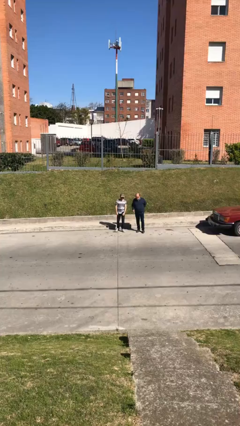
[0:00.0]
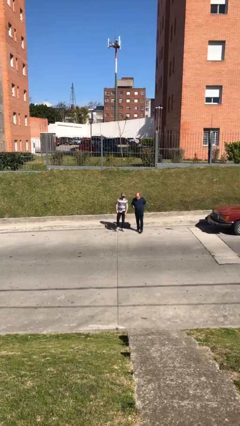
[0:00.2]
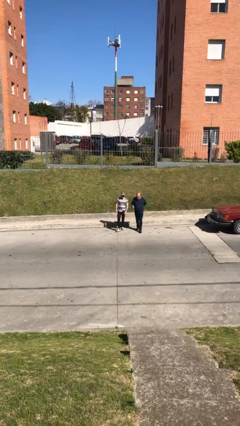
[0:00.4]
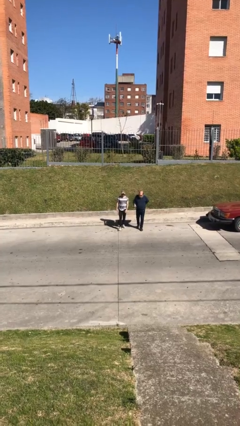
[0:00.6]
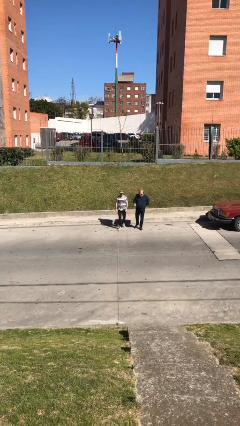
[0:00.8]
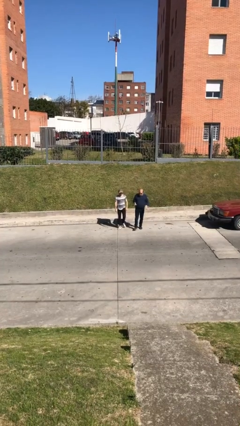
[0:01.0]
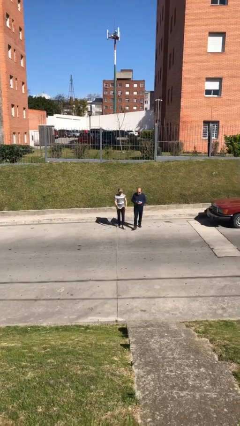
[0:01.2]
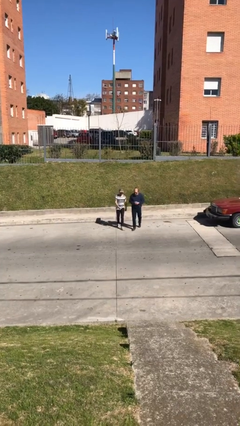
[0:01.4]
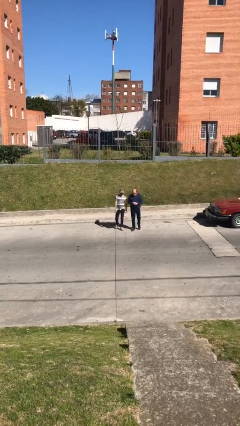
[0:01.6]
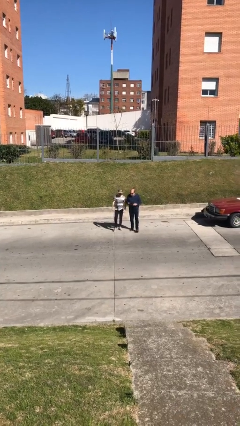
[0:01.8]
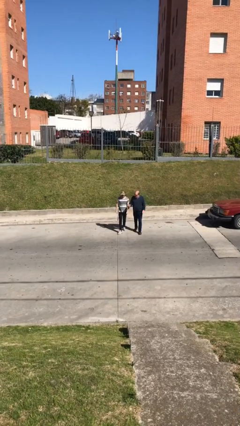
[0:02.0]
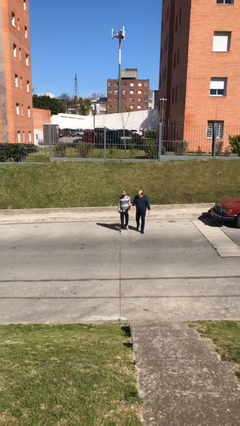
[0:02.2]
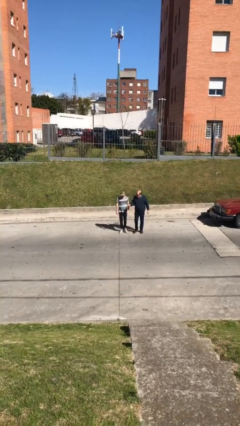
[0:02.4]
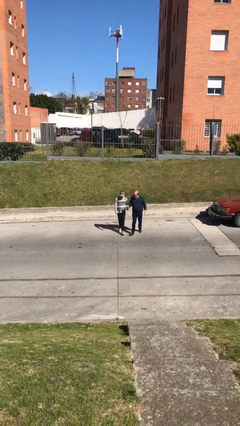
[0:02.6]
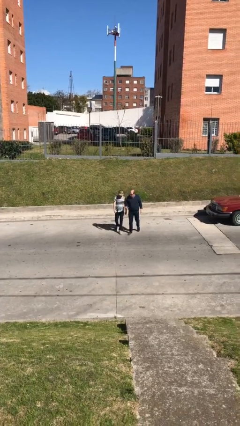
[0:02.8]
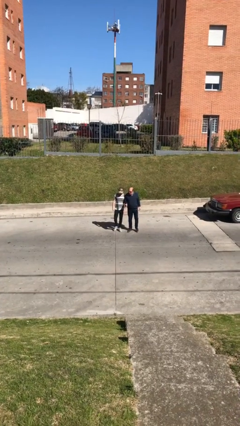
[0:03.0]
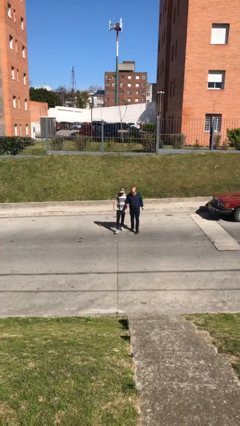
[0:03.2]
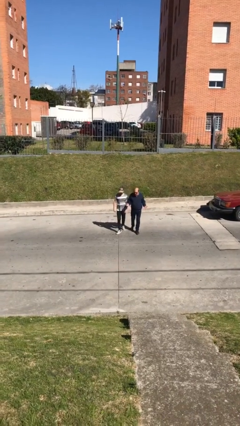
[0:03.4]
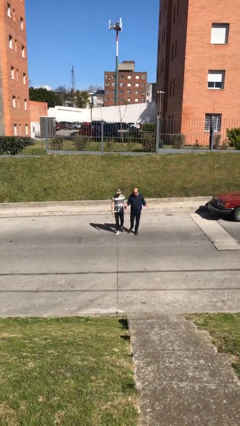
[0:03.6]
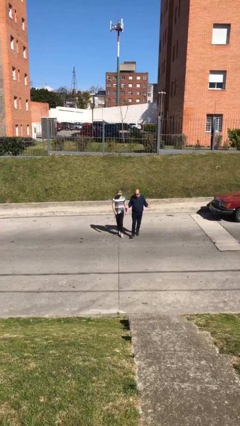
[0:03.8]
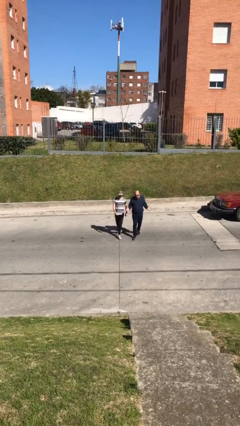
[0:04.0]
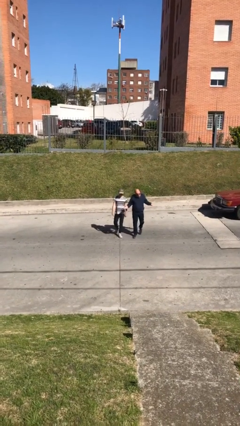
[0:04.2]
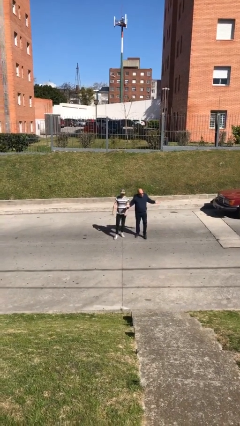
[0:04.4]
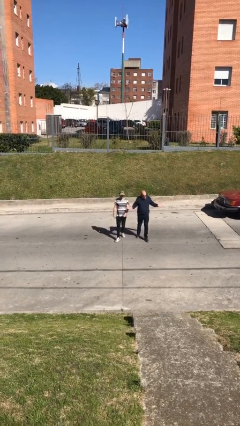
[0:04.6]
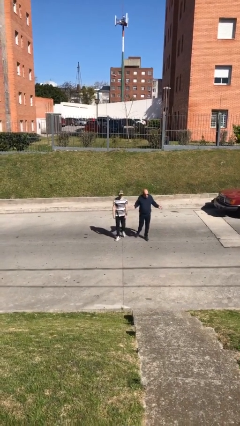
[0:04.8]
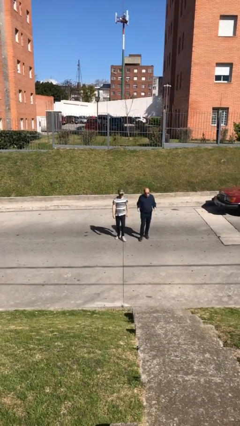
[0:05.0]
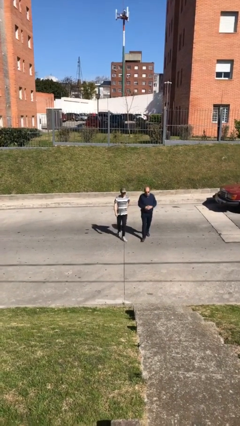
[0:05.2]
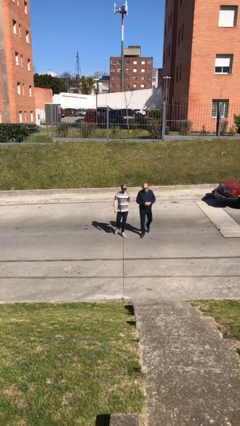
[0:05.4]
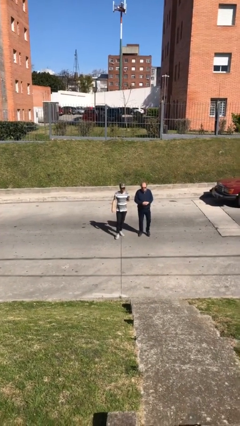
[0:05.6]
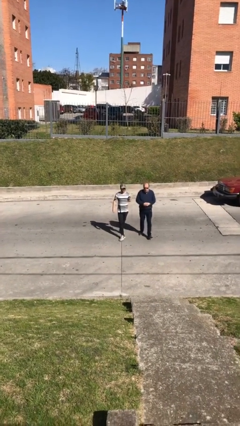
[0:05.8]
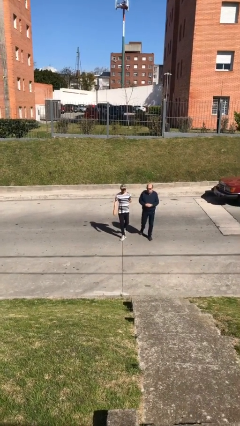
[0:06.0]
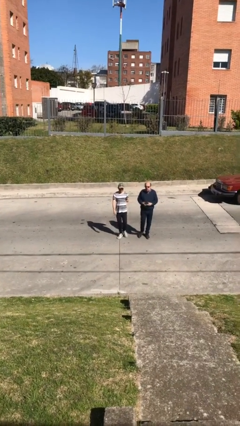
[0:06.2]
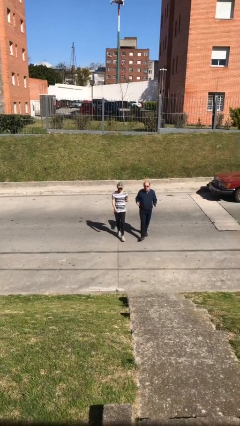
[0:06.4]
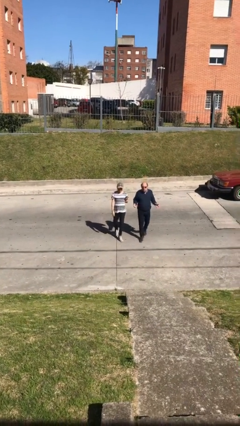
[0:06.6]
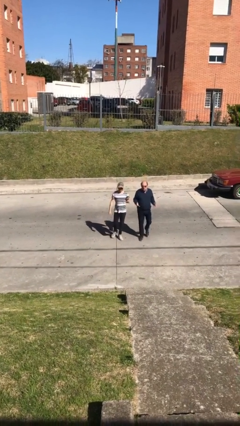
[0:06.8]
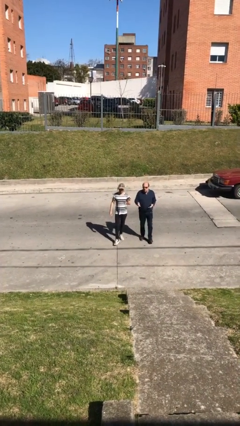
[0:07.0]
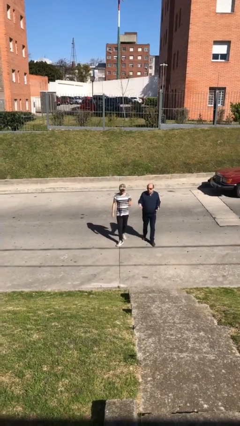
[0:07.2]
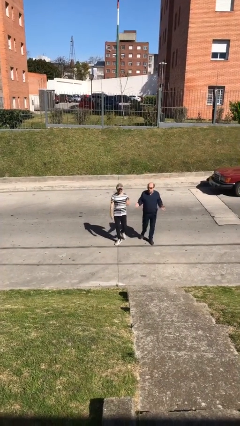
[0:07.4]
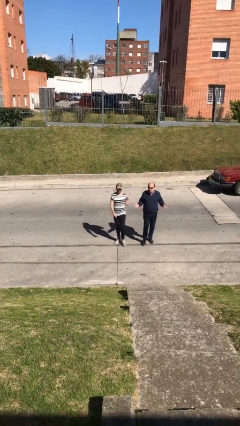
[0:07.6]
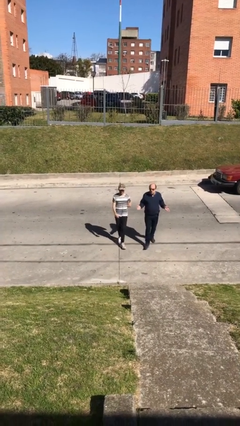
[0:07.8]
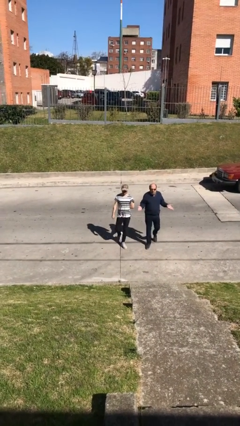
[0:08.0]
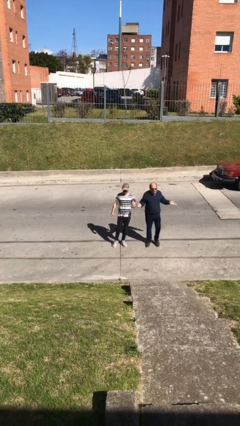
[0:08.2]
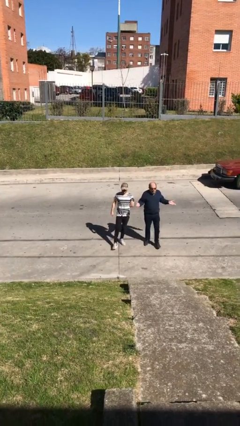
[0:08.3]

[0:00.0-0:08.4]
person talks to person

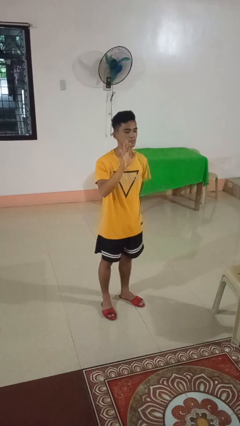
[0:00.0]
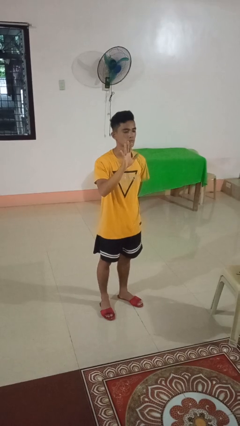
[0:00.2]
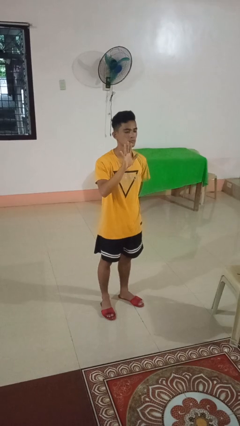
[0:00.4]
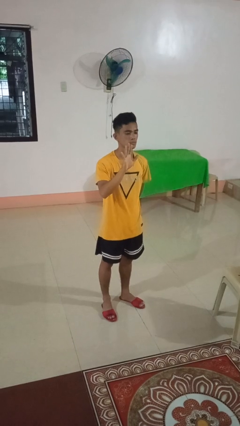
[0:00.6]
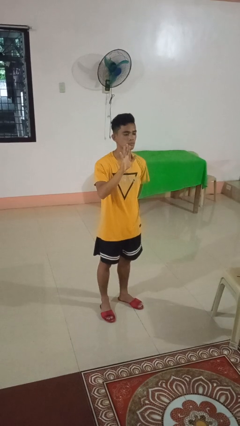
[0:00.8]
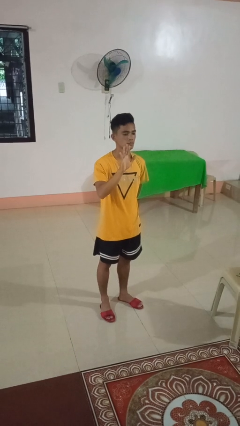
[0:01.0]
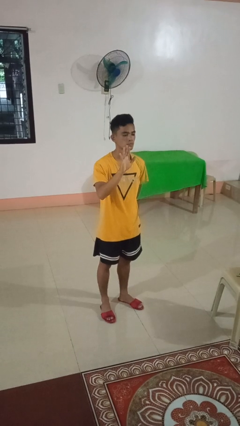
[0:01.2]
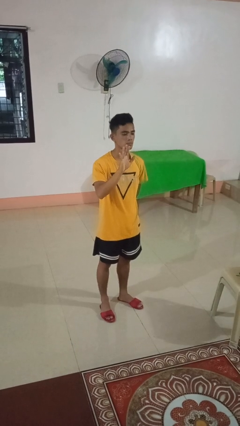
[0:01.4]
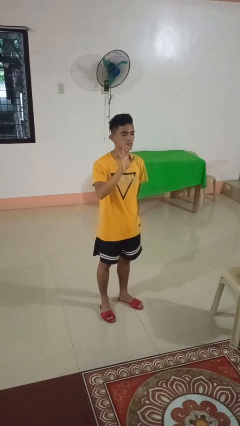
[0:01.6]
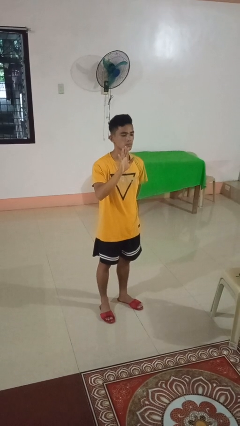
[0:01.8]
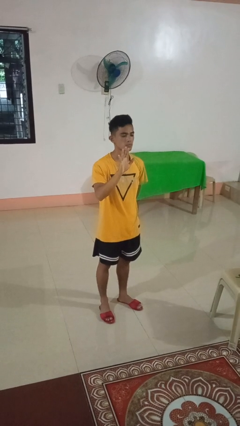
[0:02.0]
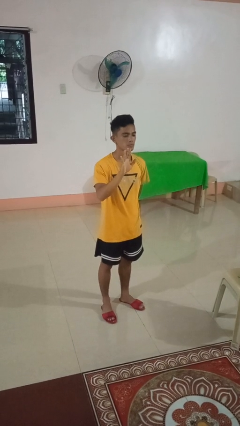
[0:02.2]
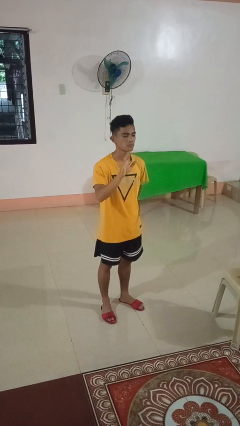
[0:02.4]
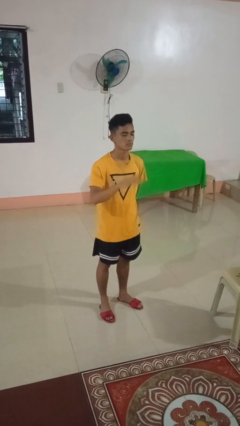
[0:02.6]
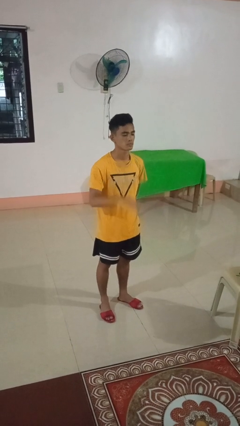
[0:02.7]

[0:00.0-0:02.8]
person gestures number five

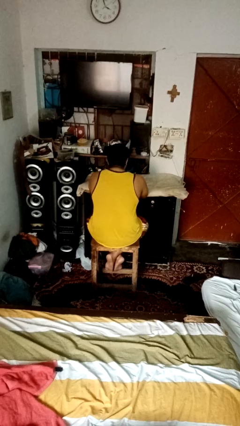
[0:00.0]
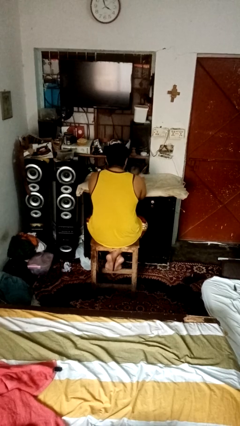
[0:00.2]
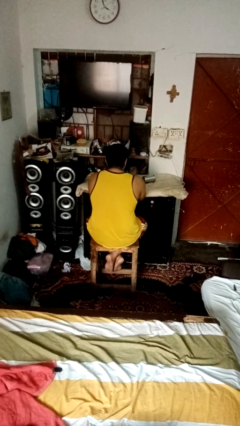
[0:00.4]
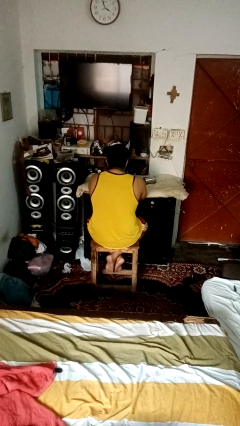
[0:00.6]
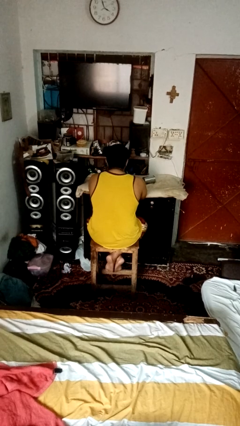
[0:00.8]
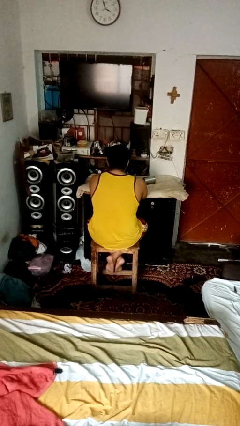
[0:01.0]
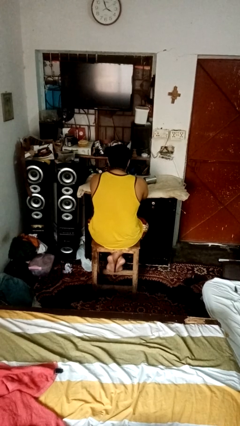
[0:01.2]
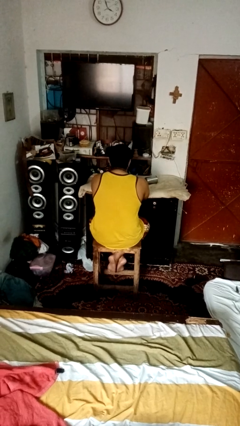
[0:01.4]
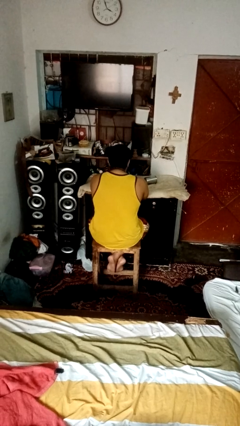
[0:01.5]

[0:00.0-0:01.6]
person knocks over glass

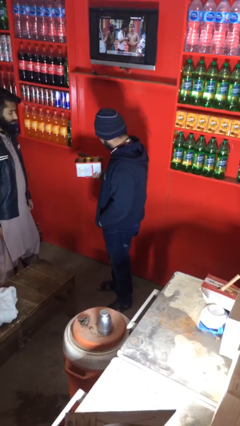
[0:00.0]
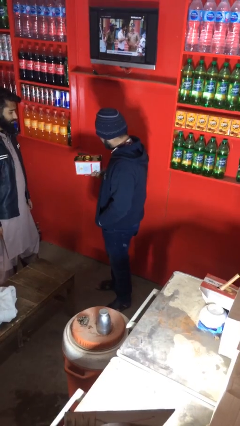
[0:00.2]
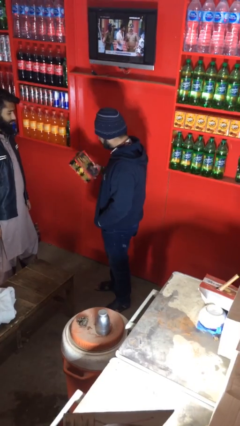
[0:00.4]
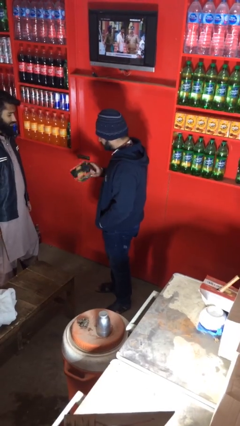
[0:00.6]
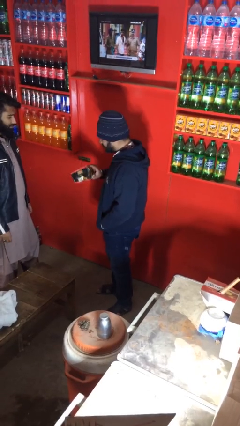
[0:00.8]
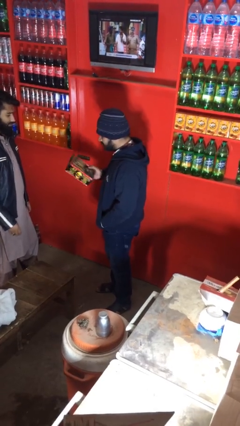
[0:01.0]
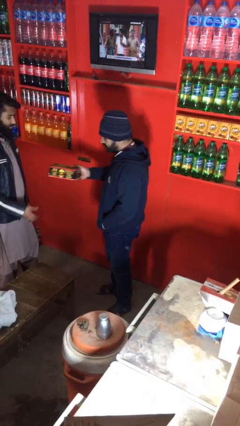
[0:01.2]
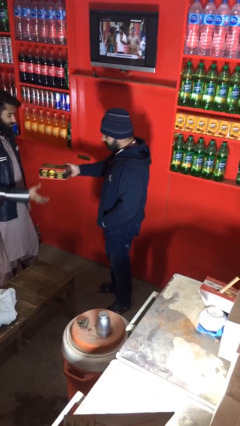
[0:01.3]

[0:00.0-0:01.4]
person transfers object to person

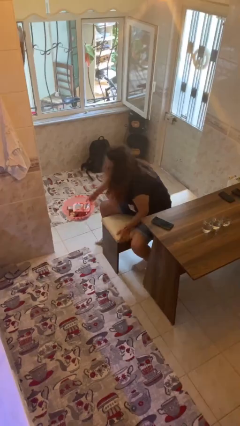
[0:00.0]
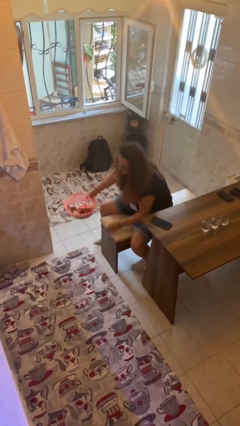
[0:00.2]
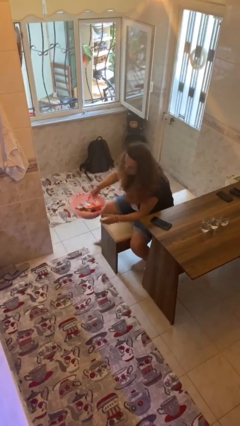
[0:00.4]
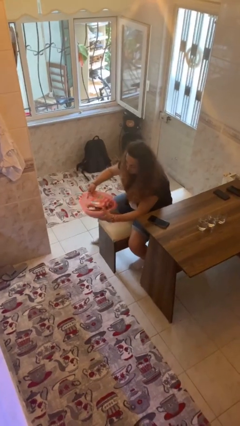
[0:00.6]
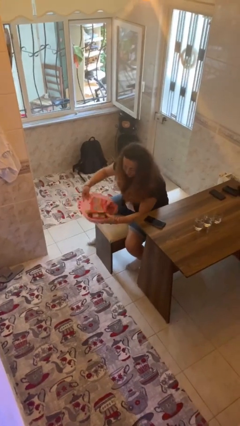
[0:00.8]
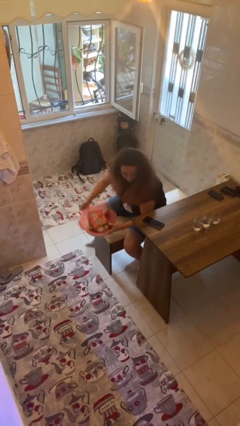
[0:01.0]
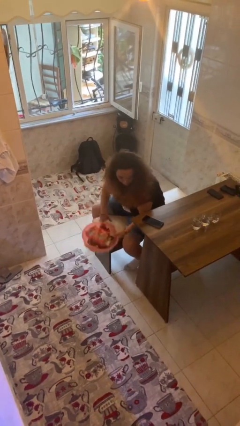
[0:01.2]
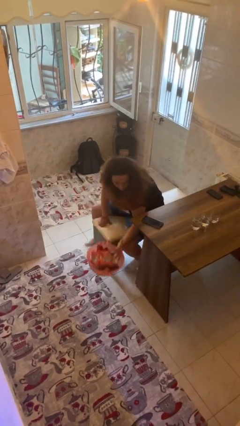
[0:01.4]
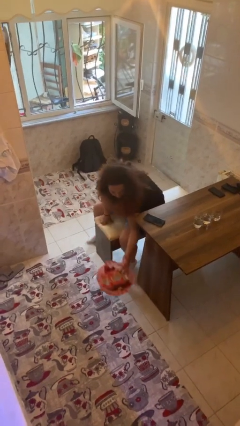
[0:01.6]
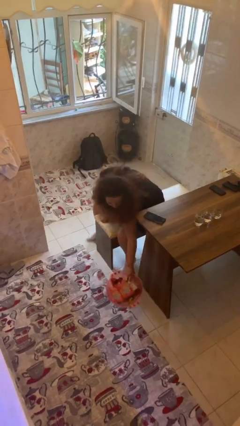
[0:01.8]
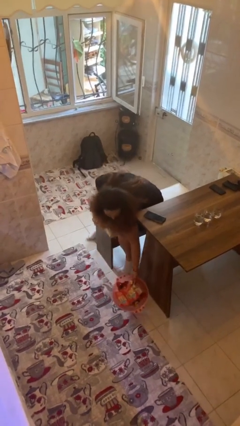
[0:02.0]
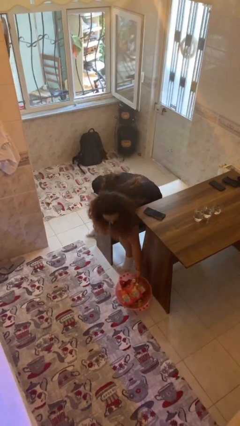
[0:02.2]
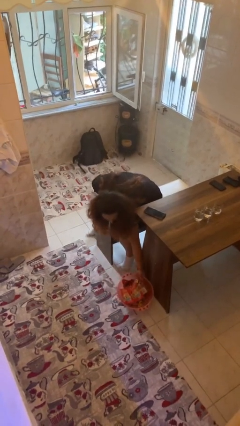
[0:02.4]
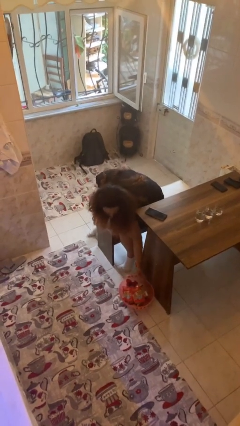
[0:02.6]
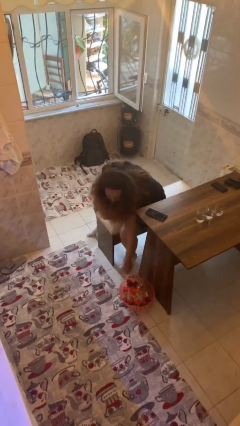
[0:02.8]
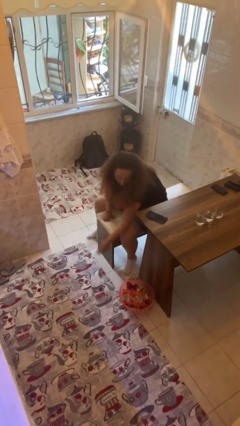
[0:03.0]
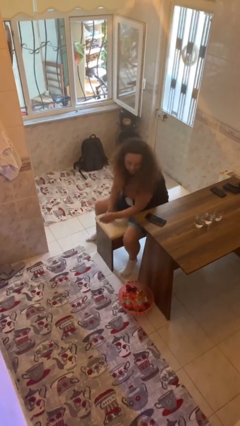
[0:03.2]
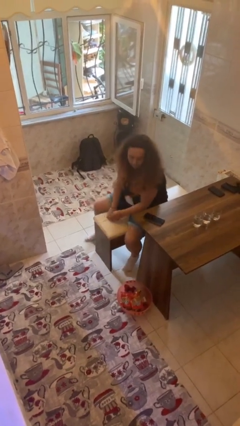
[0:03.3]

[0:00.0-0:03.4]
person puts down object on floor
